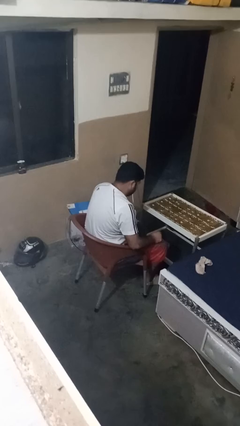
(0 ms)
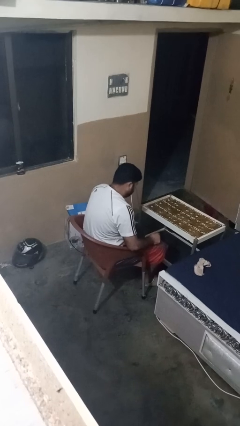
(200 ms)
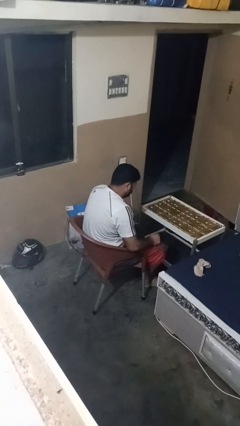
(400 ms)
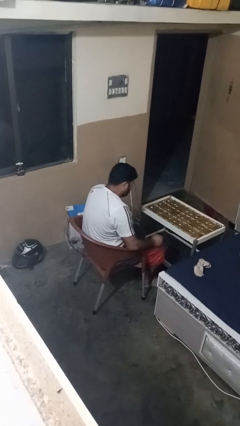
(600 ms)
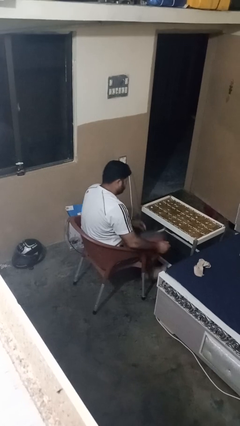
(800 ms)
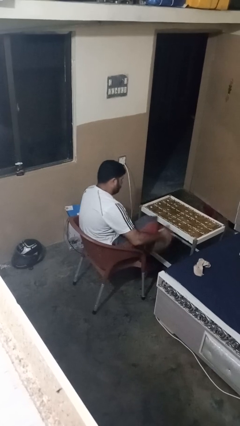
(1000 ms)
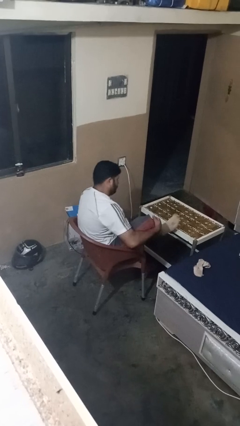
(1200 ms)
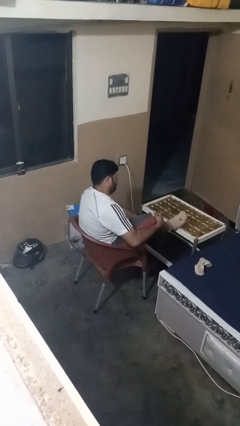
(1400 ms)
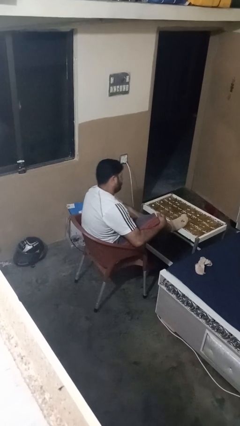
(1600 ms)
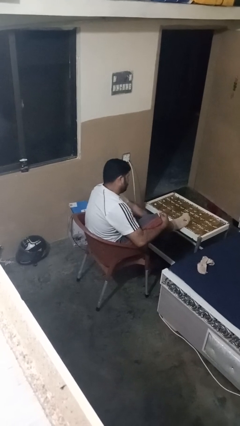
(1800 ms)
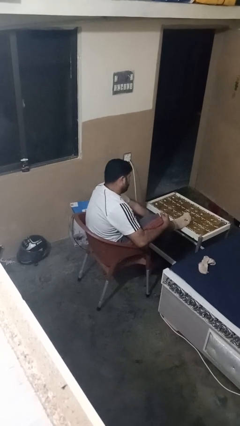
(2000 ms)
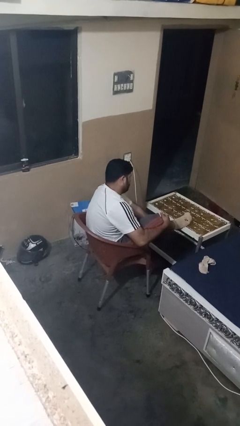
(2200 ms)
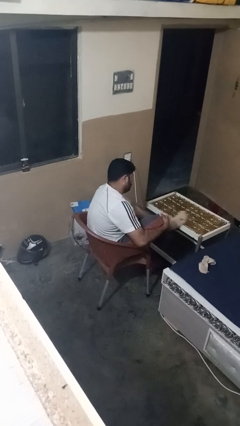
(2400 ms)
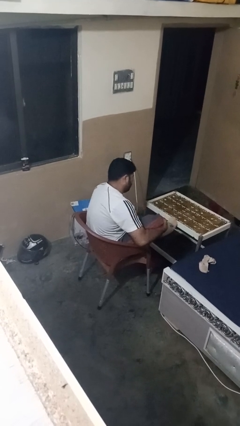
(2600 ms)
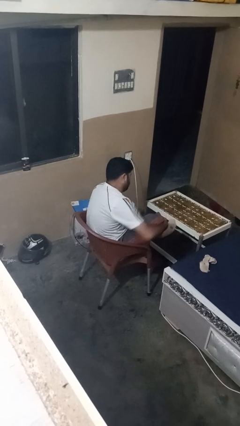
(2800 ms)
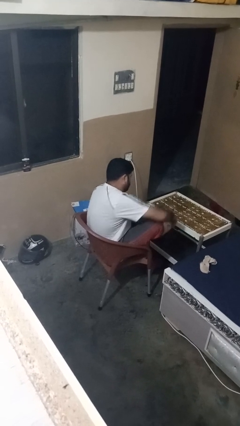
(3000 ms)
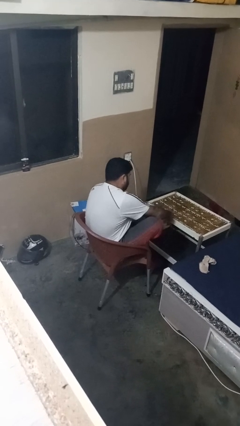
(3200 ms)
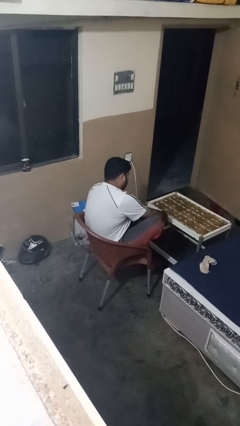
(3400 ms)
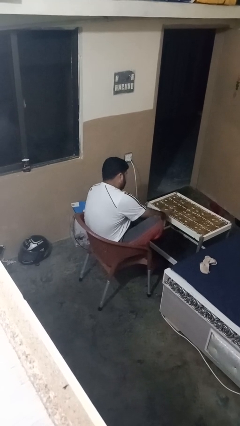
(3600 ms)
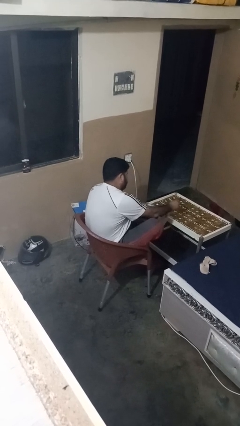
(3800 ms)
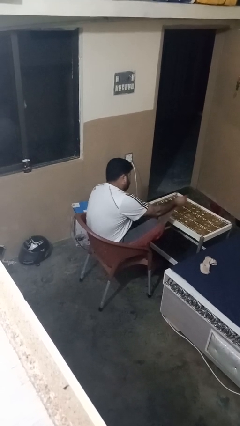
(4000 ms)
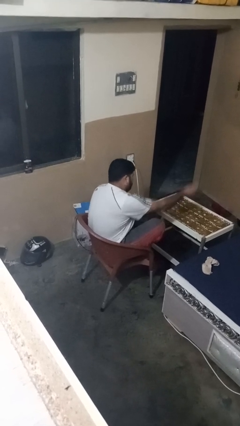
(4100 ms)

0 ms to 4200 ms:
person takes off socks

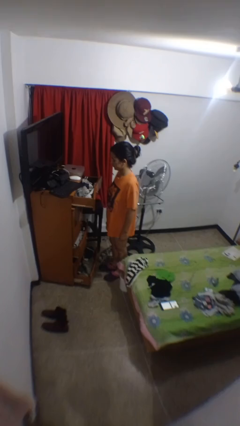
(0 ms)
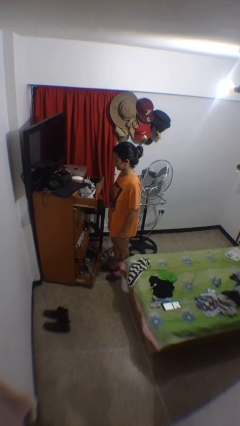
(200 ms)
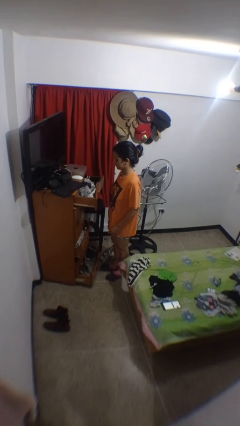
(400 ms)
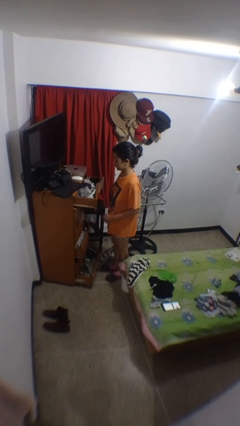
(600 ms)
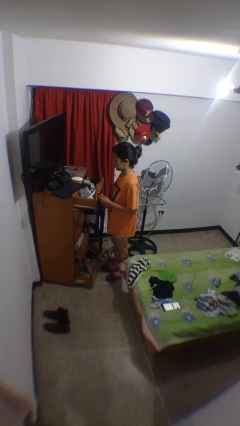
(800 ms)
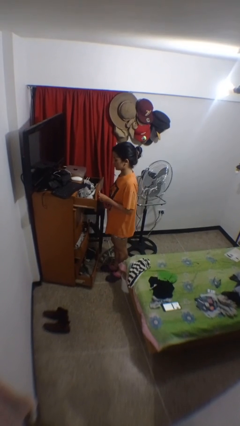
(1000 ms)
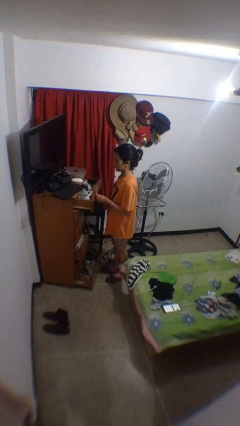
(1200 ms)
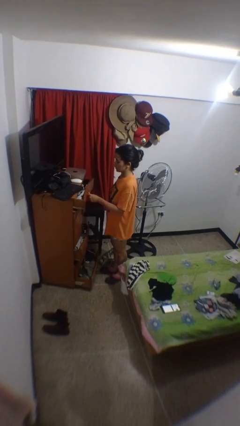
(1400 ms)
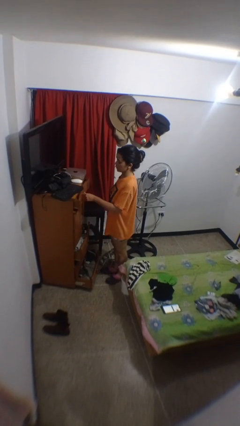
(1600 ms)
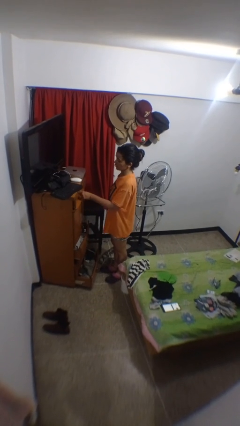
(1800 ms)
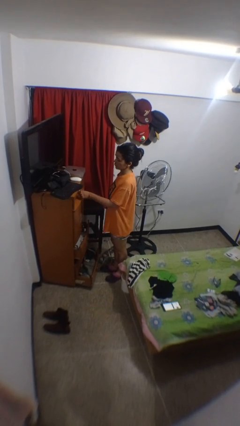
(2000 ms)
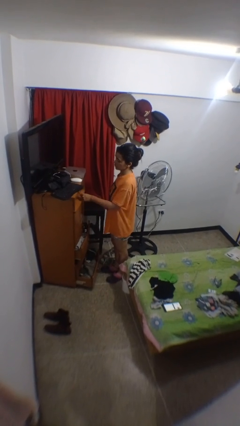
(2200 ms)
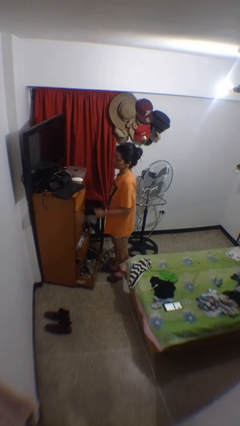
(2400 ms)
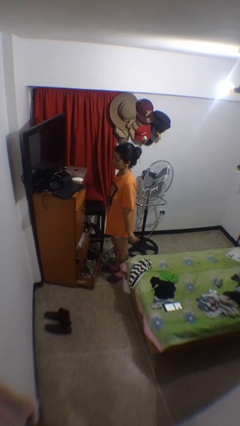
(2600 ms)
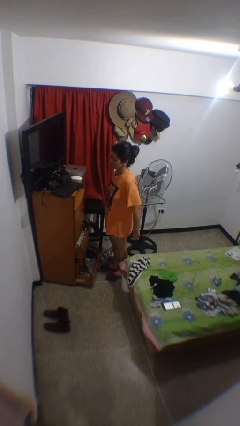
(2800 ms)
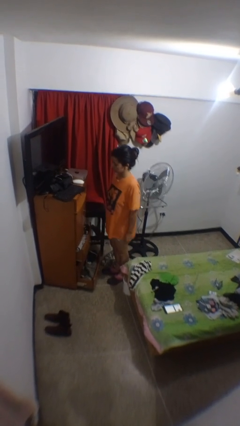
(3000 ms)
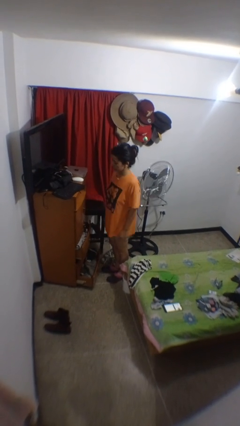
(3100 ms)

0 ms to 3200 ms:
person closes dresser drawer

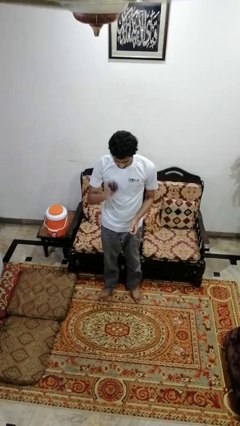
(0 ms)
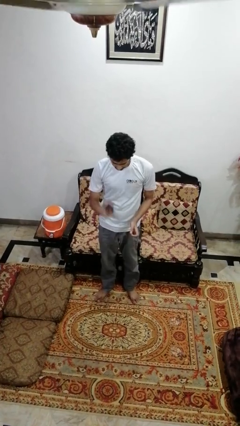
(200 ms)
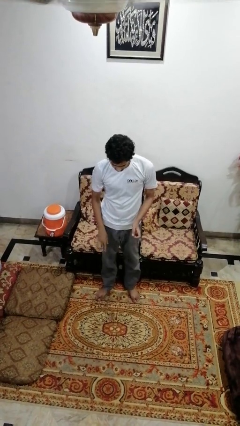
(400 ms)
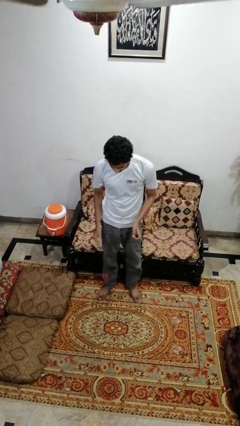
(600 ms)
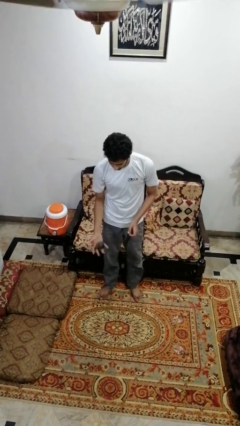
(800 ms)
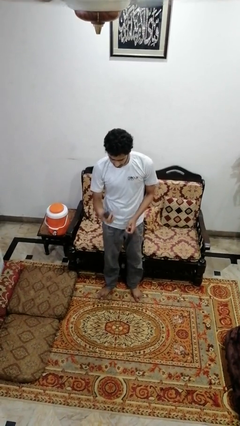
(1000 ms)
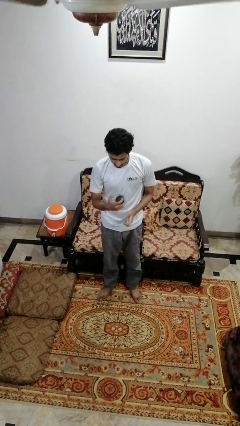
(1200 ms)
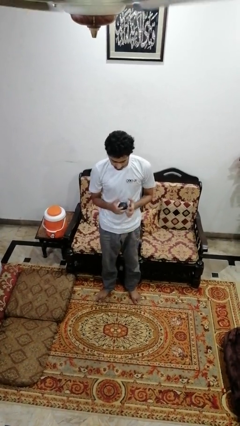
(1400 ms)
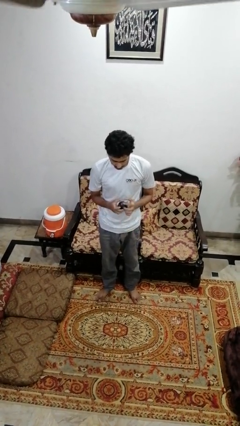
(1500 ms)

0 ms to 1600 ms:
person bounces ball on floor

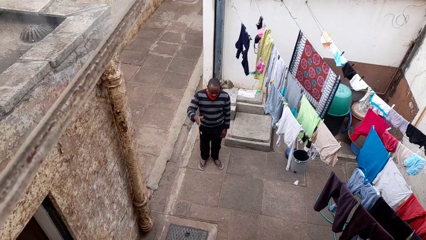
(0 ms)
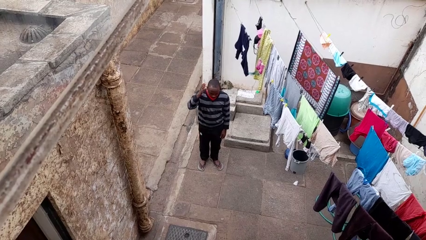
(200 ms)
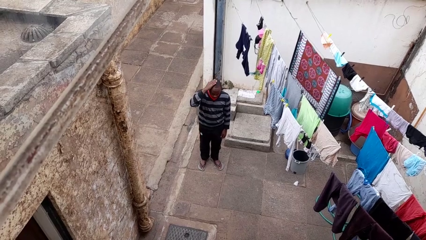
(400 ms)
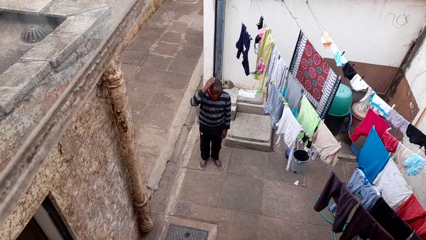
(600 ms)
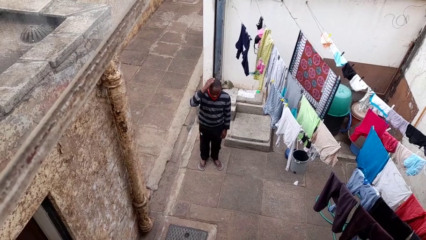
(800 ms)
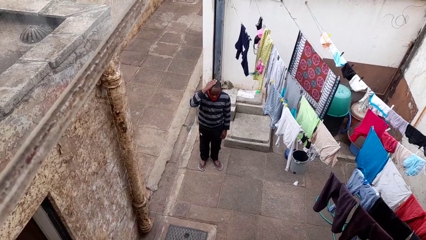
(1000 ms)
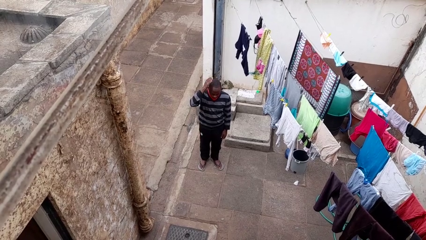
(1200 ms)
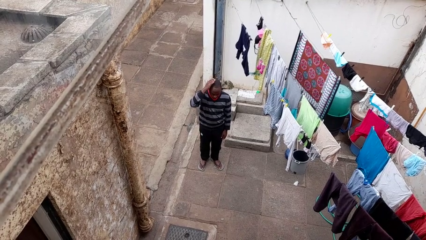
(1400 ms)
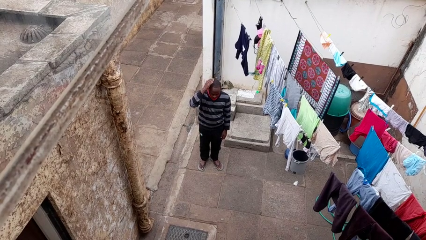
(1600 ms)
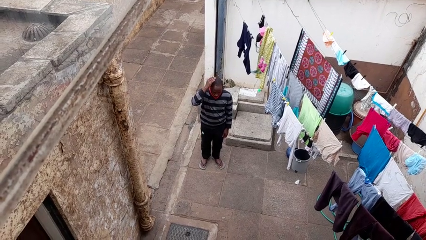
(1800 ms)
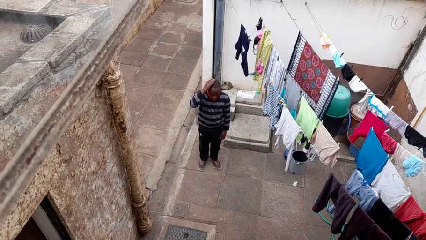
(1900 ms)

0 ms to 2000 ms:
person pats head

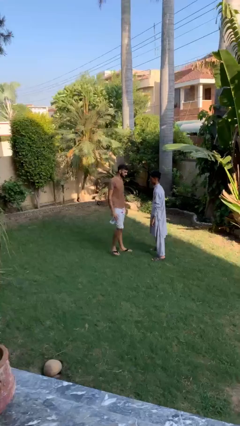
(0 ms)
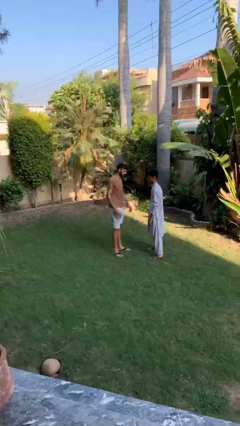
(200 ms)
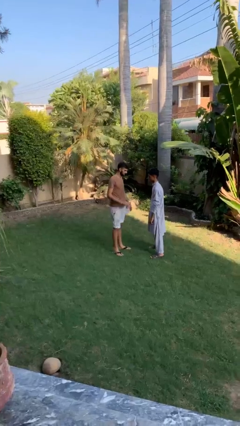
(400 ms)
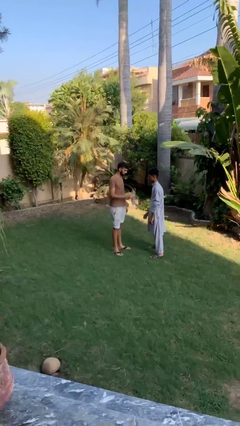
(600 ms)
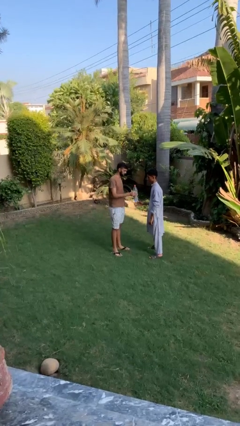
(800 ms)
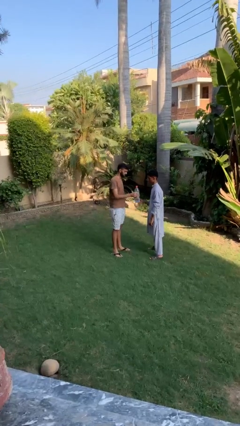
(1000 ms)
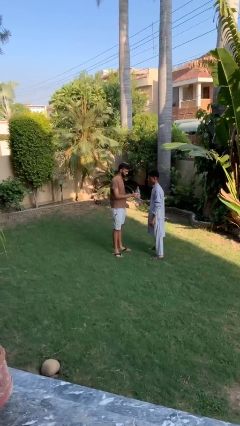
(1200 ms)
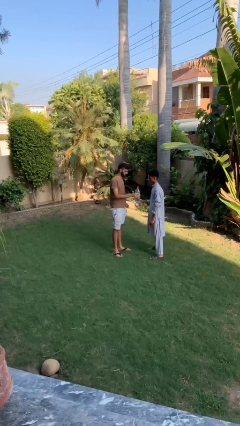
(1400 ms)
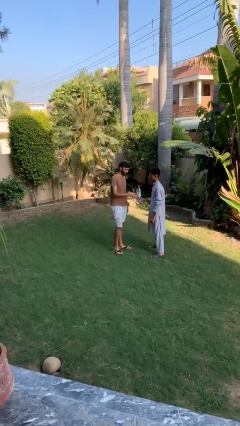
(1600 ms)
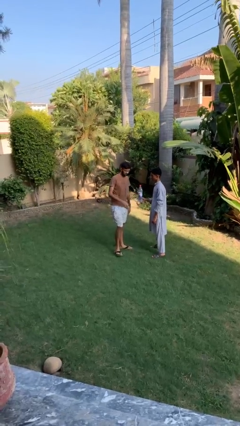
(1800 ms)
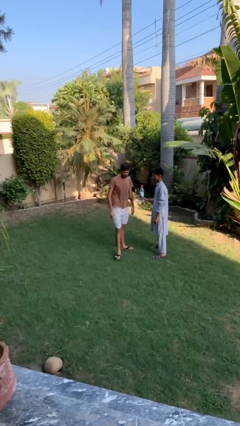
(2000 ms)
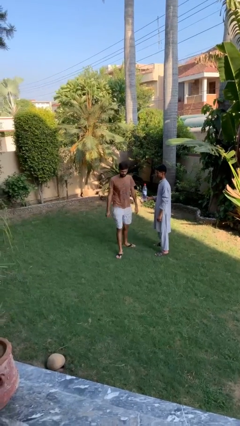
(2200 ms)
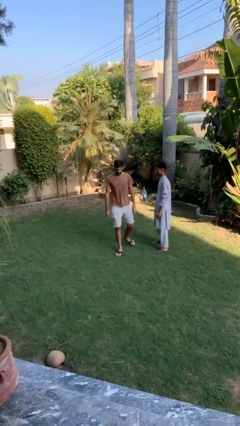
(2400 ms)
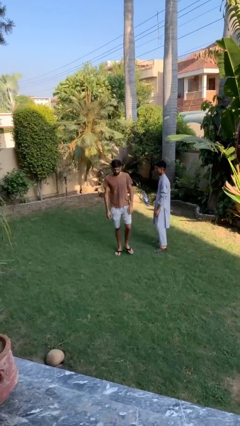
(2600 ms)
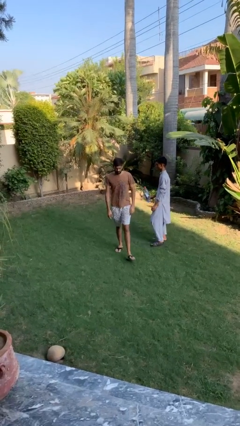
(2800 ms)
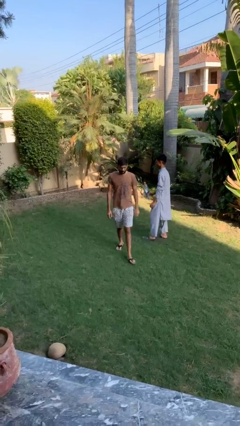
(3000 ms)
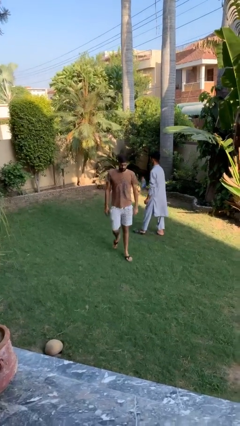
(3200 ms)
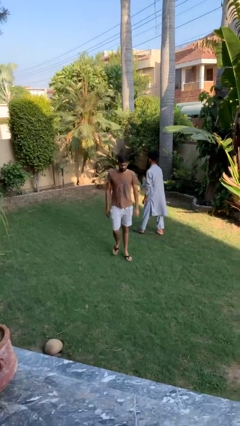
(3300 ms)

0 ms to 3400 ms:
person transfers object to person

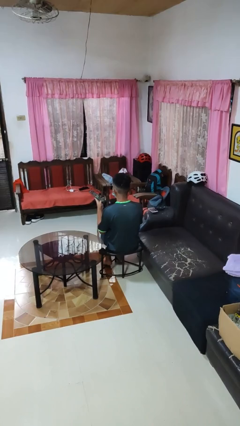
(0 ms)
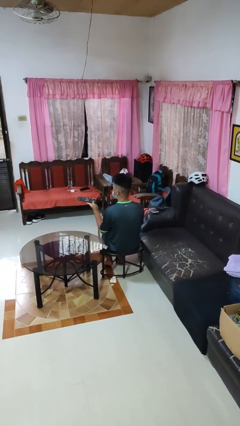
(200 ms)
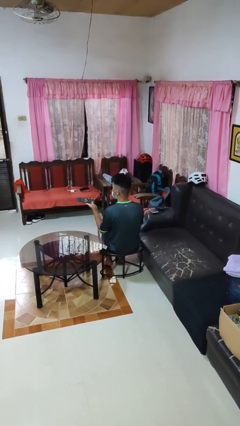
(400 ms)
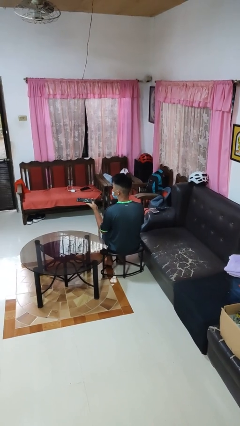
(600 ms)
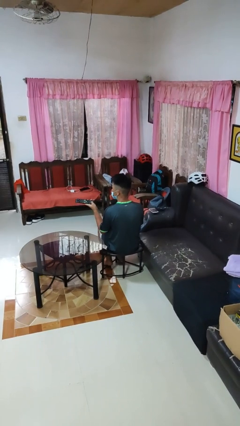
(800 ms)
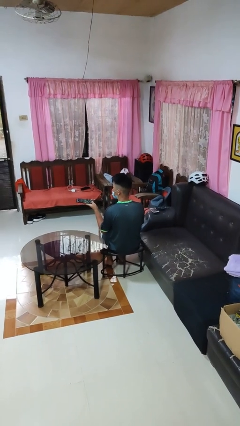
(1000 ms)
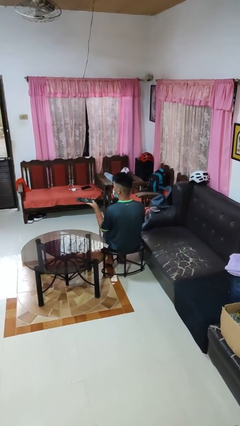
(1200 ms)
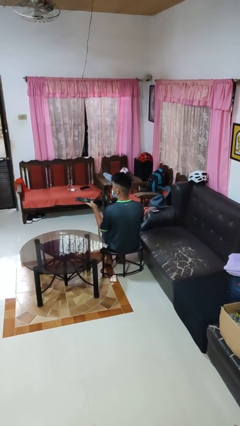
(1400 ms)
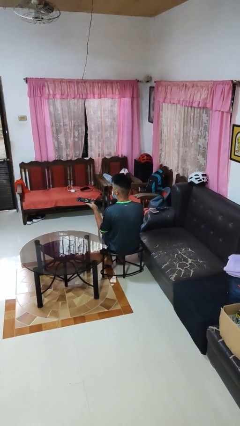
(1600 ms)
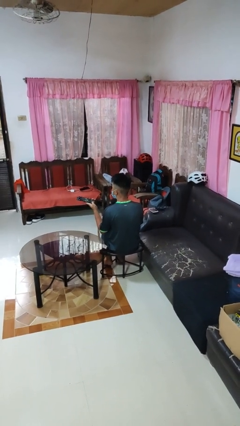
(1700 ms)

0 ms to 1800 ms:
person uses television remote

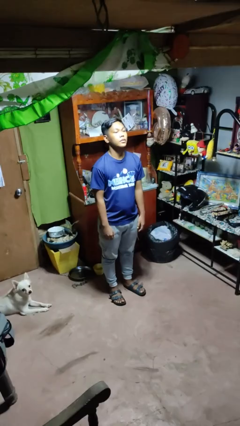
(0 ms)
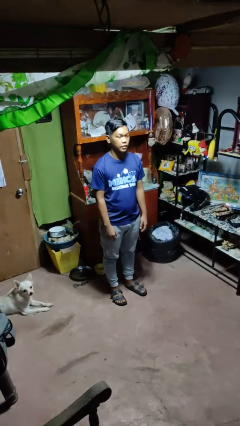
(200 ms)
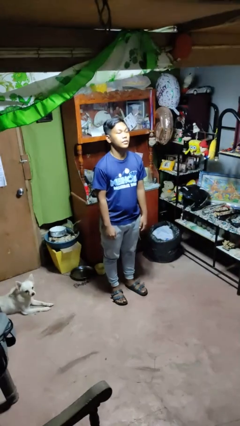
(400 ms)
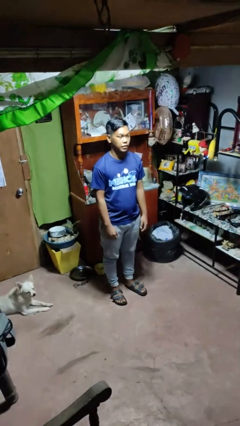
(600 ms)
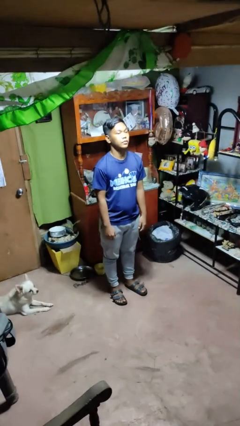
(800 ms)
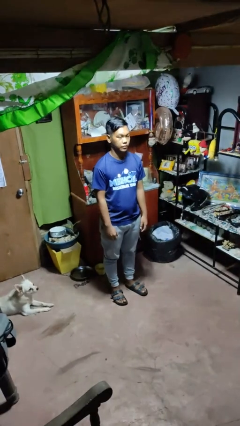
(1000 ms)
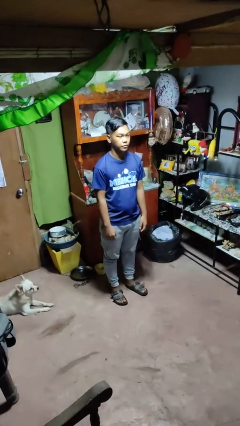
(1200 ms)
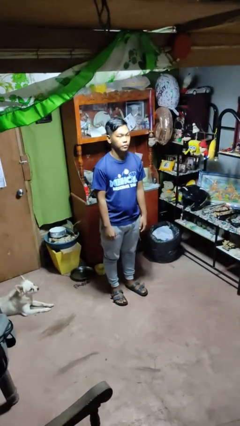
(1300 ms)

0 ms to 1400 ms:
person nods head
